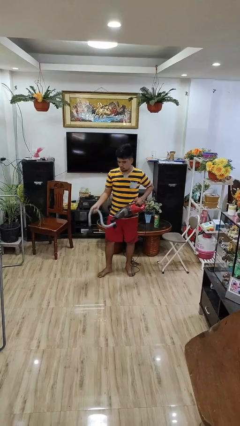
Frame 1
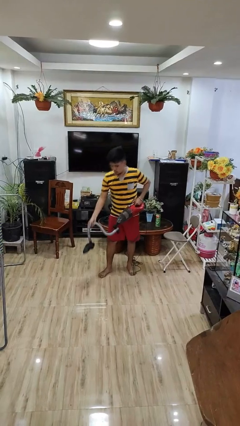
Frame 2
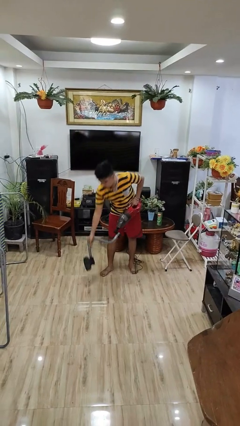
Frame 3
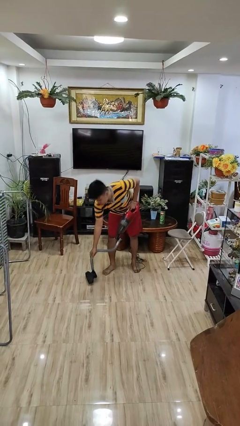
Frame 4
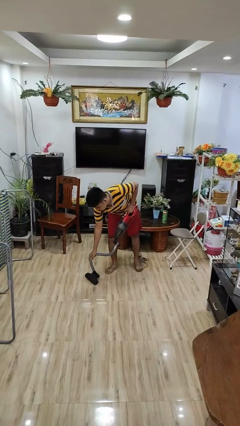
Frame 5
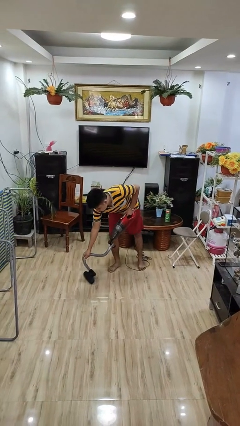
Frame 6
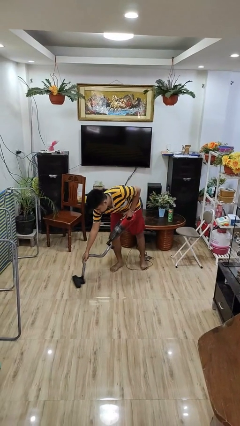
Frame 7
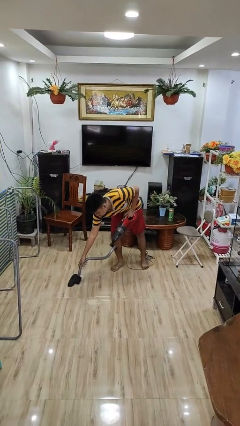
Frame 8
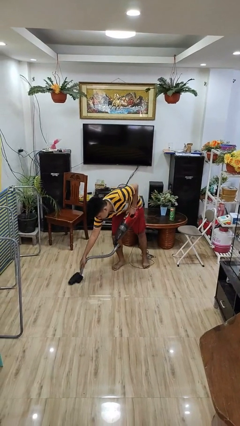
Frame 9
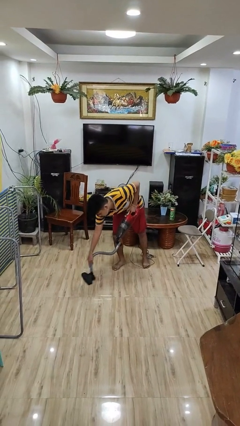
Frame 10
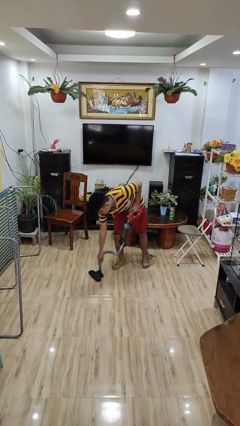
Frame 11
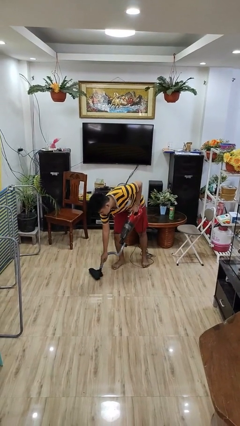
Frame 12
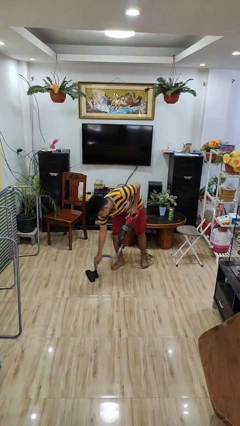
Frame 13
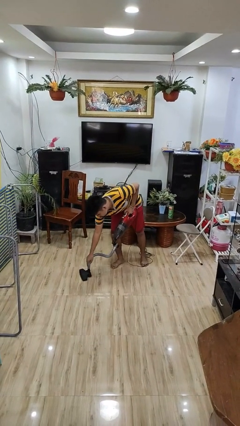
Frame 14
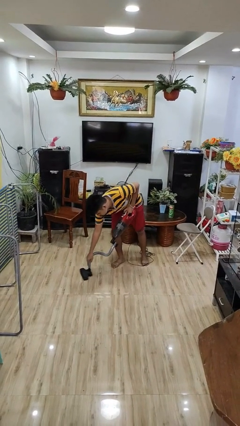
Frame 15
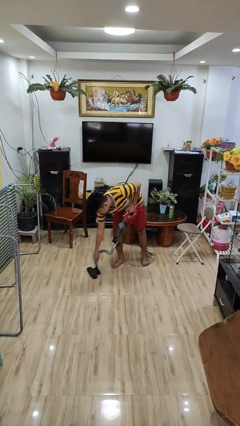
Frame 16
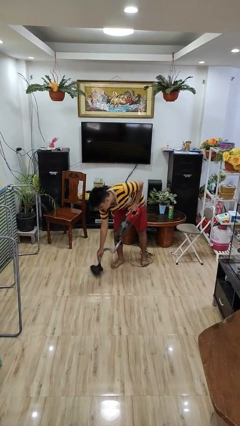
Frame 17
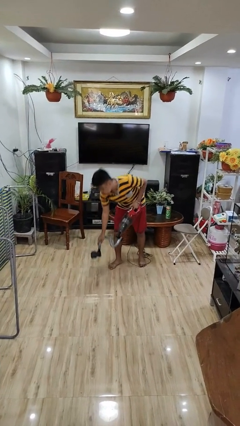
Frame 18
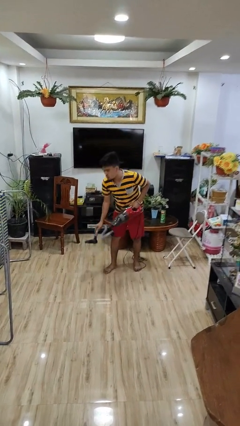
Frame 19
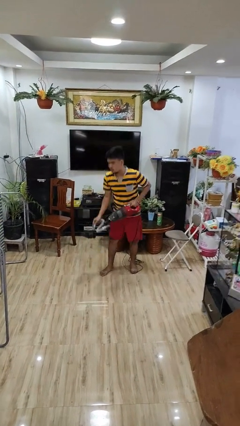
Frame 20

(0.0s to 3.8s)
person vacuums carpet

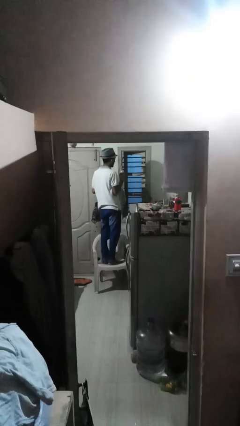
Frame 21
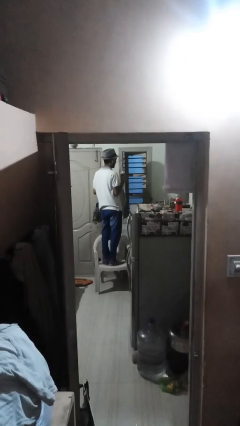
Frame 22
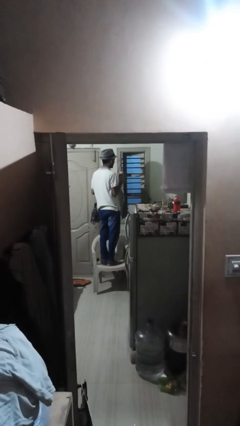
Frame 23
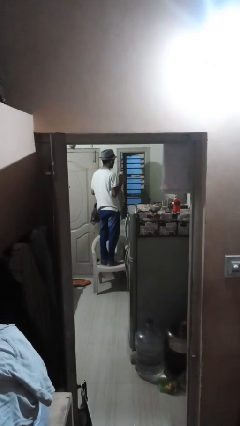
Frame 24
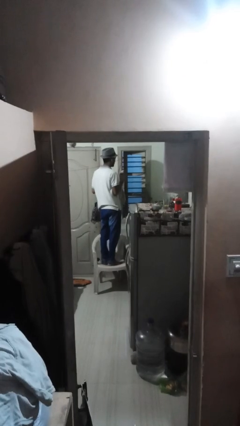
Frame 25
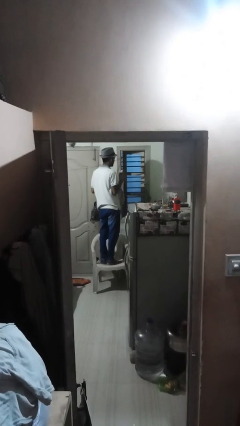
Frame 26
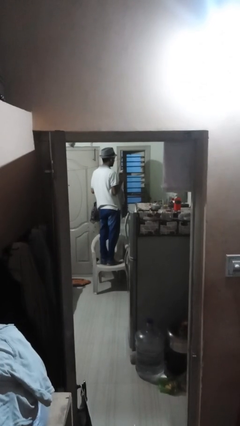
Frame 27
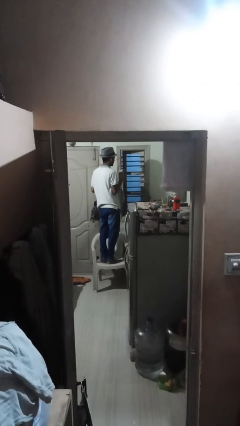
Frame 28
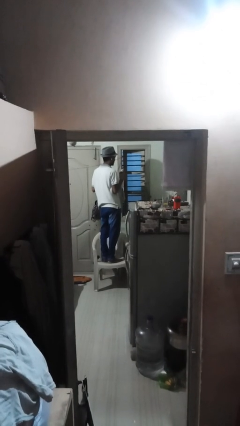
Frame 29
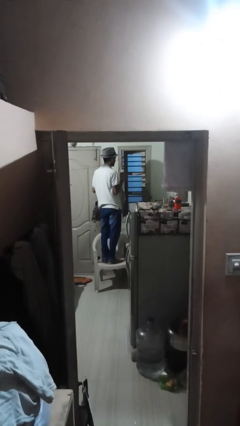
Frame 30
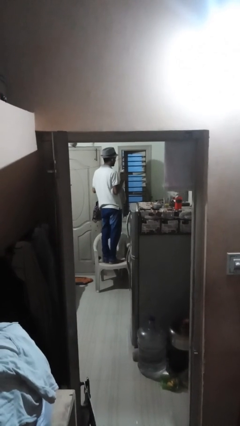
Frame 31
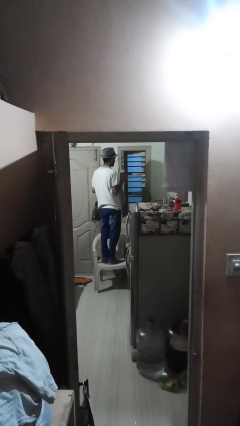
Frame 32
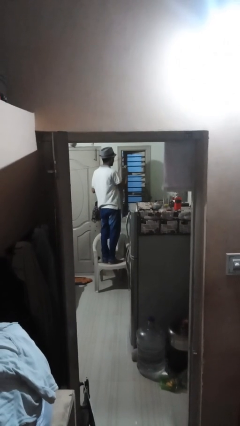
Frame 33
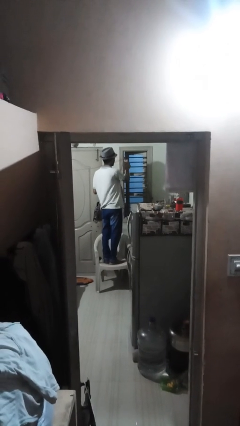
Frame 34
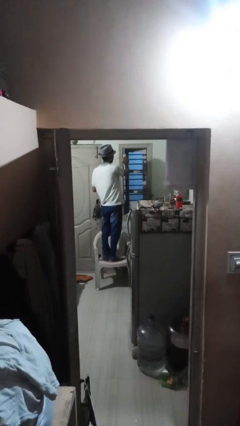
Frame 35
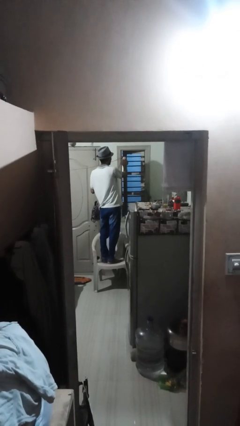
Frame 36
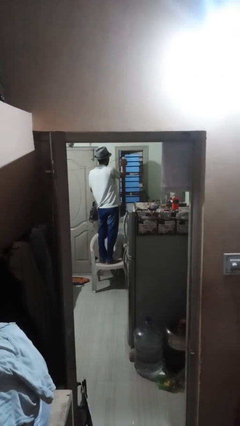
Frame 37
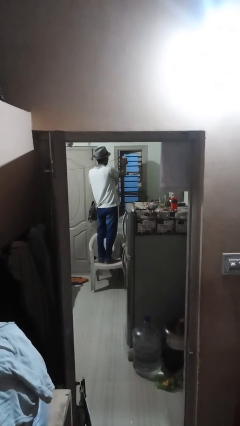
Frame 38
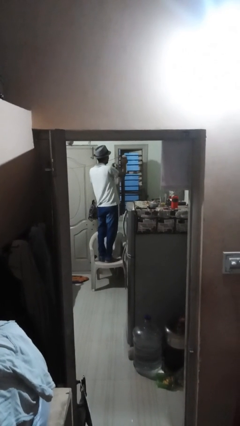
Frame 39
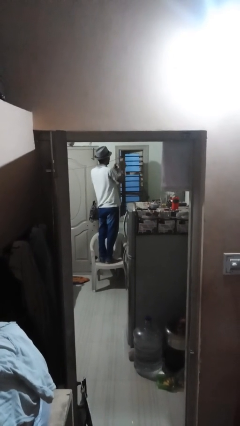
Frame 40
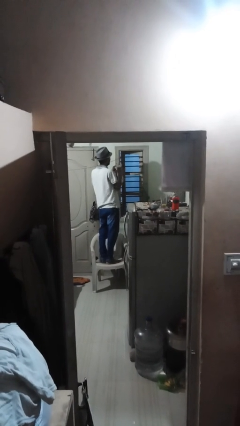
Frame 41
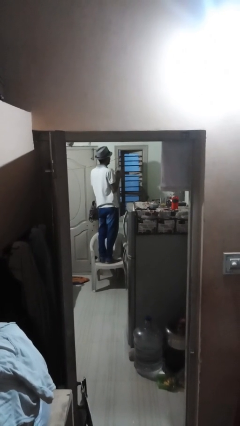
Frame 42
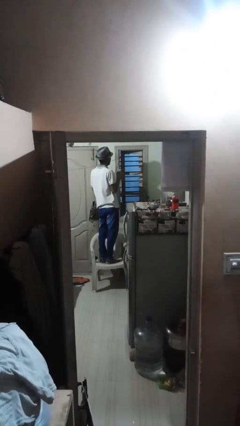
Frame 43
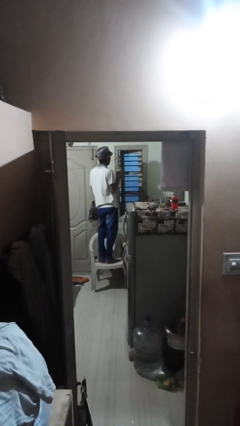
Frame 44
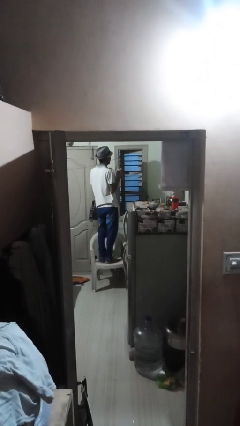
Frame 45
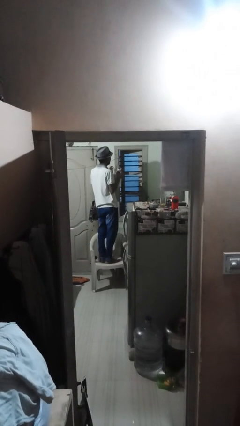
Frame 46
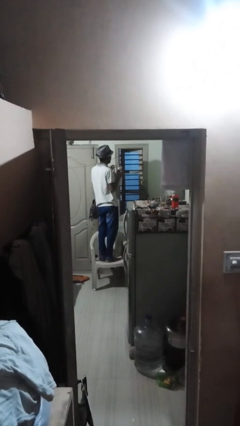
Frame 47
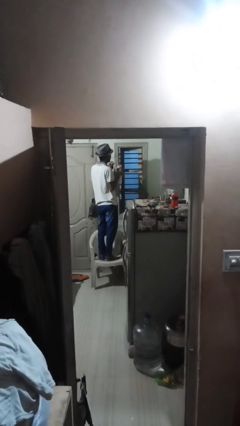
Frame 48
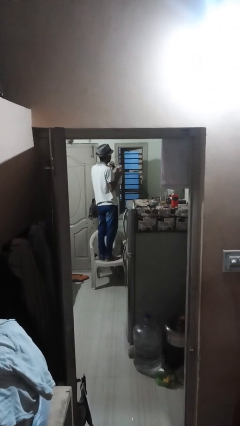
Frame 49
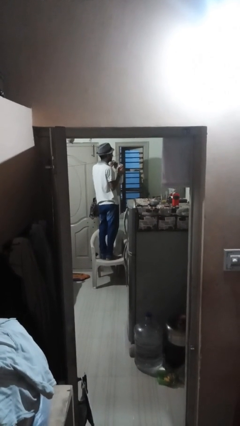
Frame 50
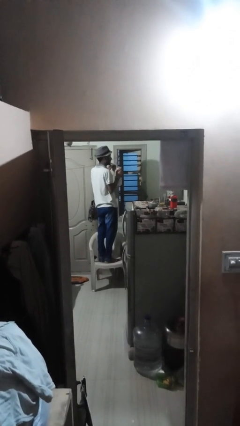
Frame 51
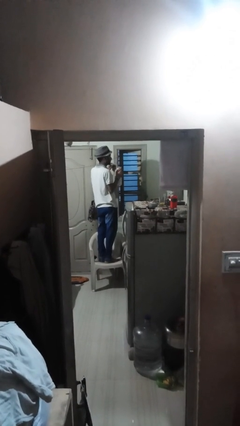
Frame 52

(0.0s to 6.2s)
person sprays from bottle

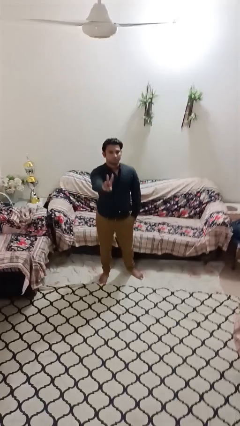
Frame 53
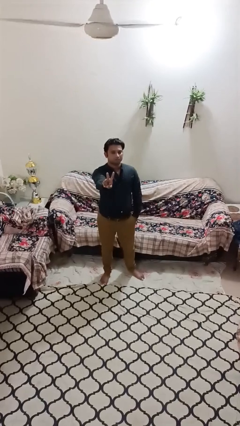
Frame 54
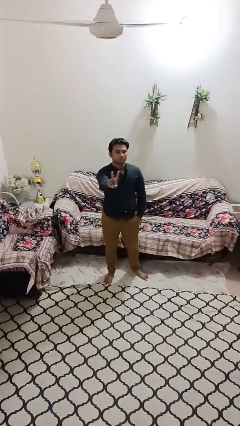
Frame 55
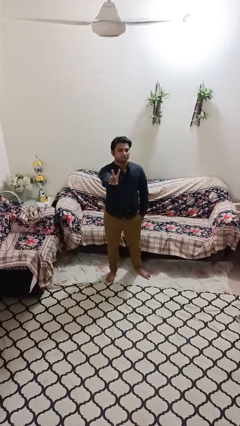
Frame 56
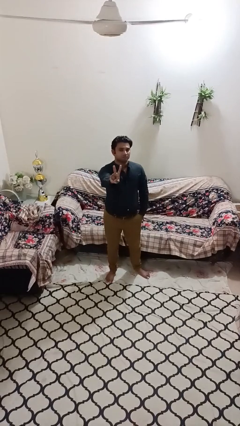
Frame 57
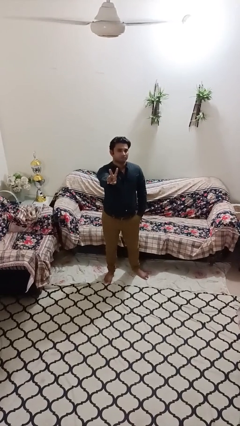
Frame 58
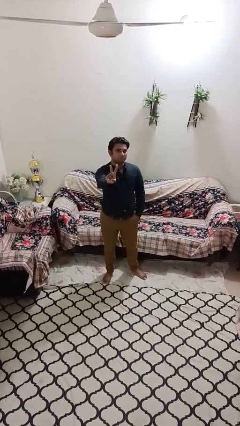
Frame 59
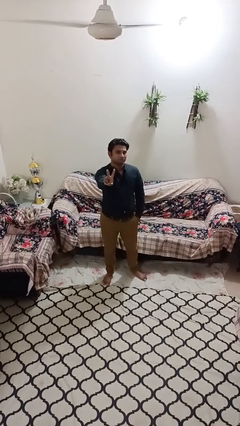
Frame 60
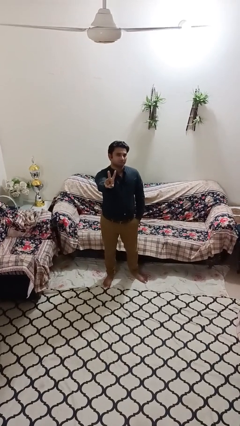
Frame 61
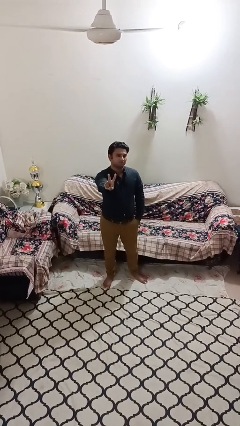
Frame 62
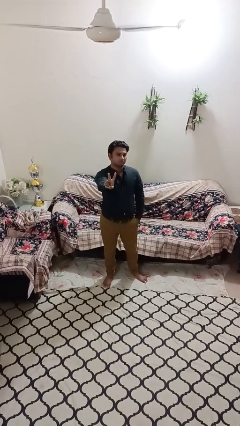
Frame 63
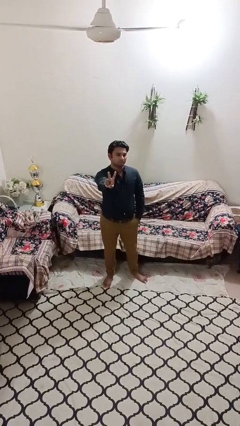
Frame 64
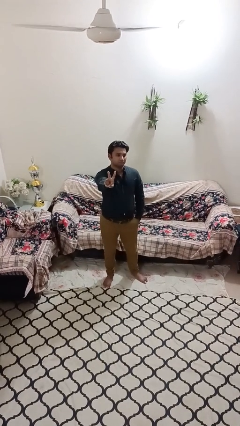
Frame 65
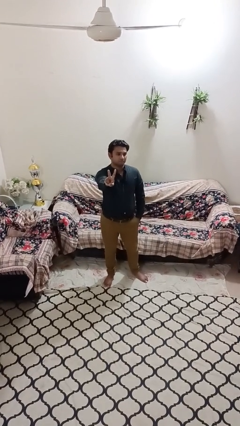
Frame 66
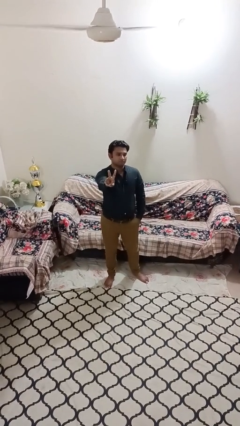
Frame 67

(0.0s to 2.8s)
person gestures peace

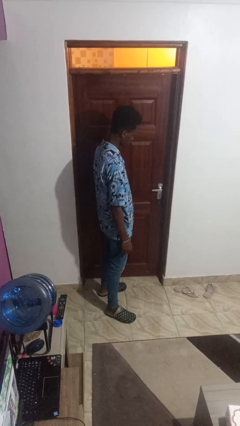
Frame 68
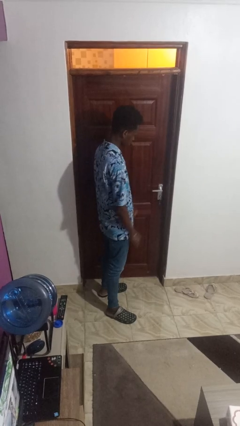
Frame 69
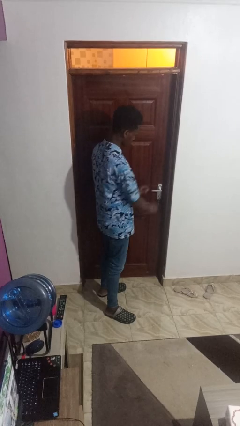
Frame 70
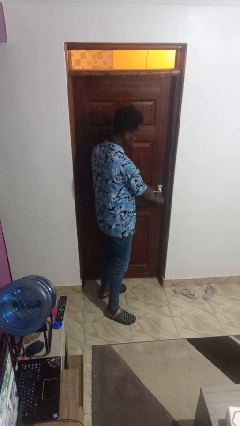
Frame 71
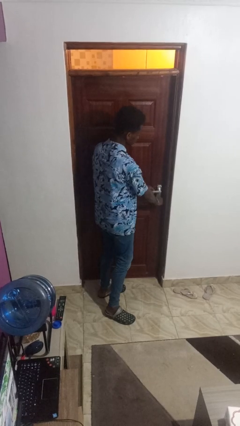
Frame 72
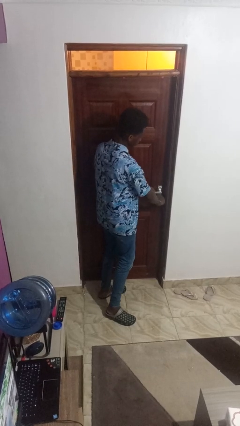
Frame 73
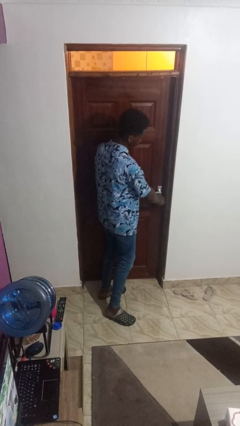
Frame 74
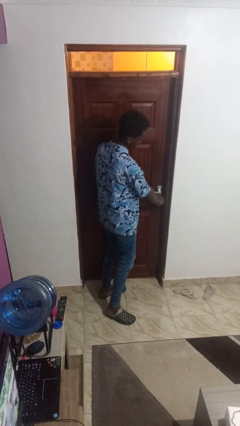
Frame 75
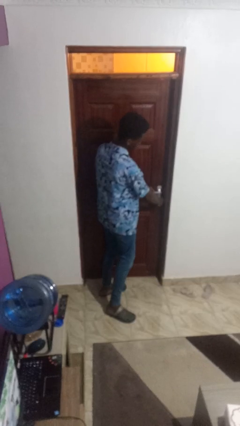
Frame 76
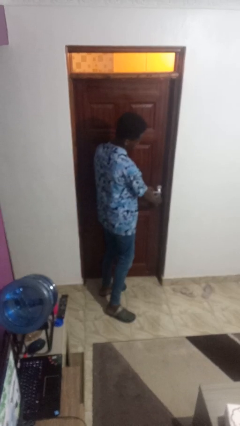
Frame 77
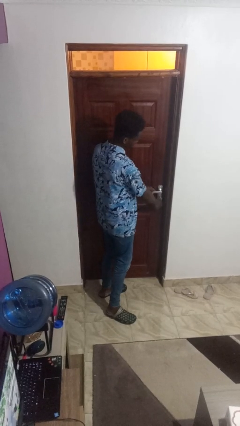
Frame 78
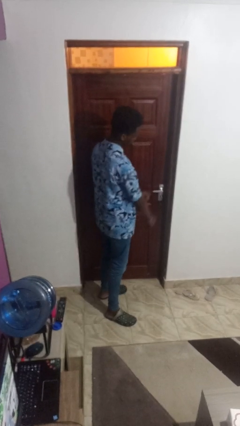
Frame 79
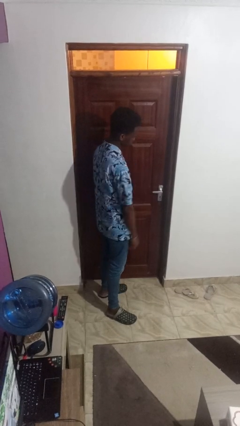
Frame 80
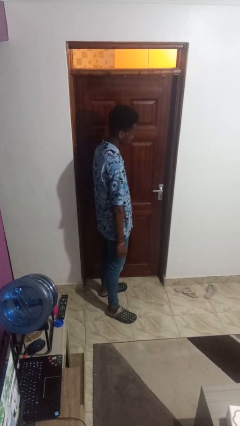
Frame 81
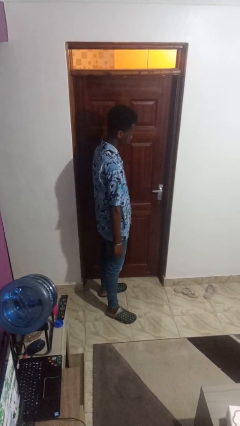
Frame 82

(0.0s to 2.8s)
person locks door with keys
